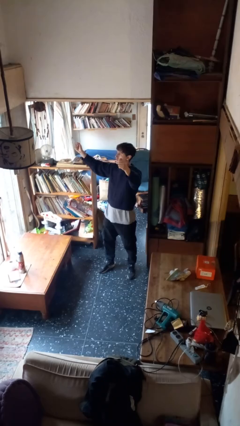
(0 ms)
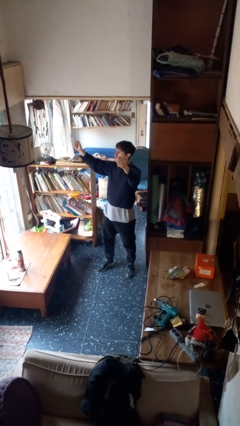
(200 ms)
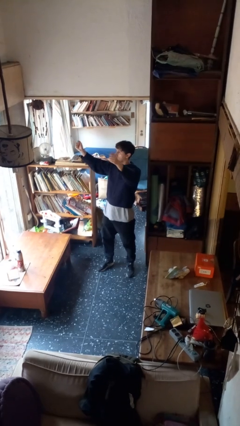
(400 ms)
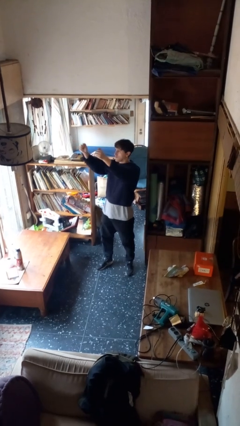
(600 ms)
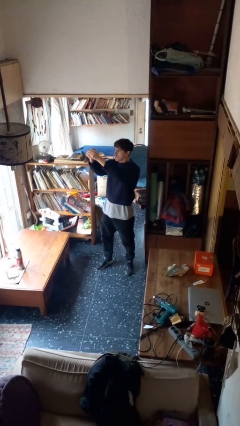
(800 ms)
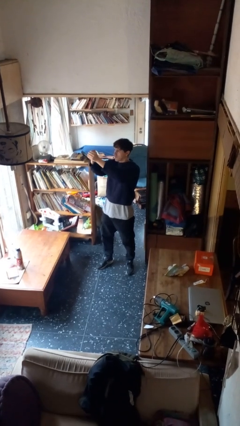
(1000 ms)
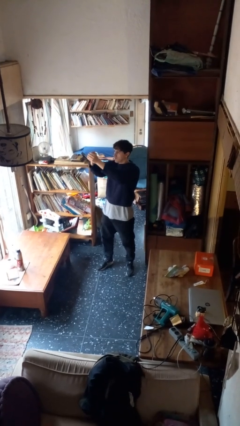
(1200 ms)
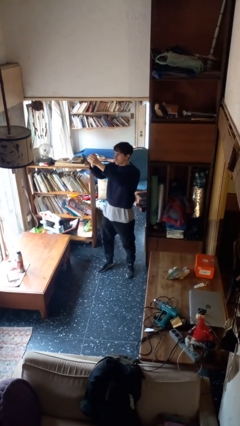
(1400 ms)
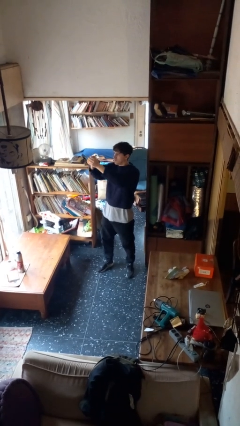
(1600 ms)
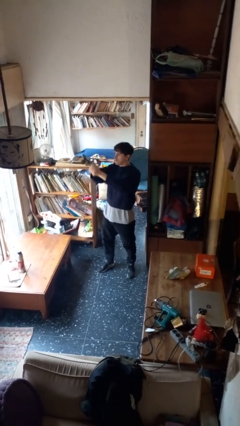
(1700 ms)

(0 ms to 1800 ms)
person gestures zoom out

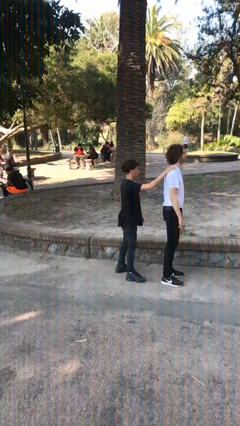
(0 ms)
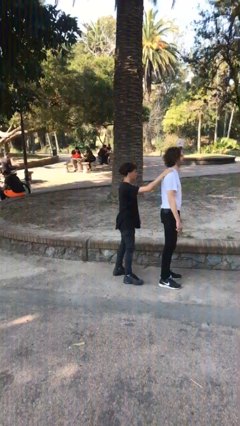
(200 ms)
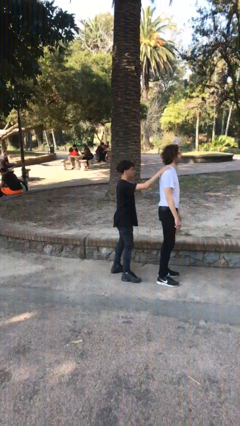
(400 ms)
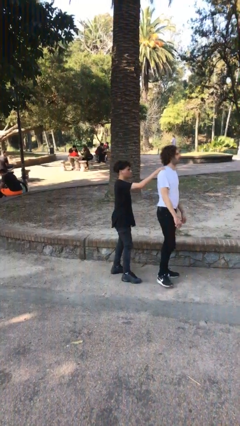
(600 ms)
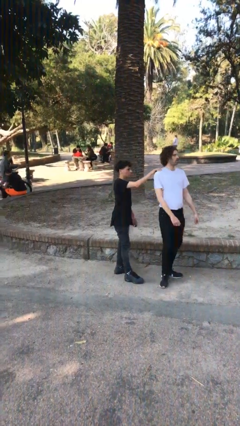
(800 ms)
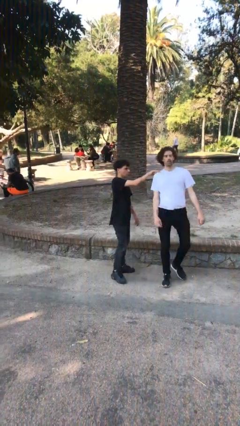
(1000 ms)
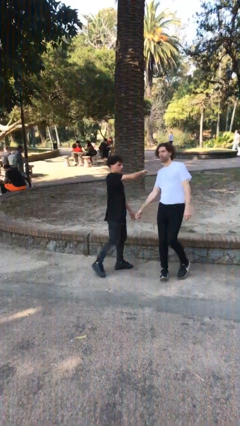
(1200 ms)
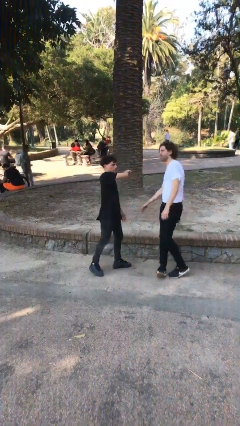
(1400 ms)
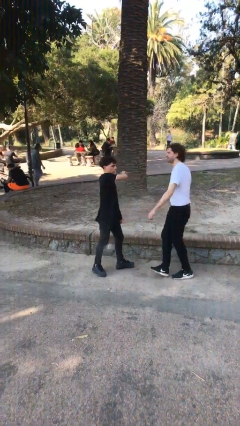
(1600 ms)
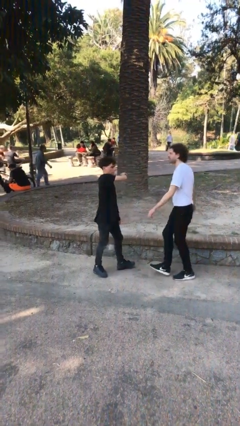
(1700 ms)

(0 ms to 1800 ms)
person spins person around

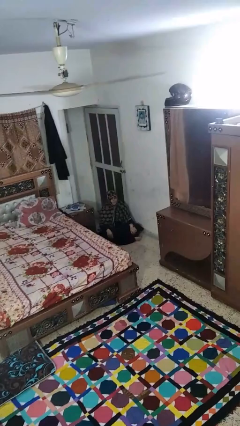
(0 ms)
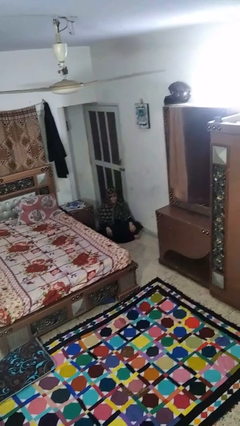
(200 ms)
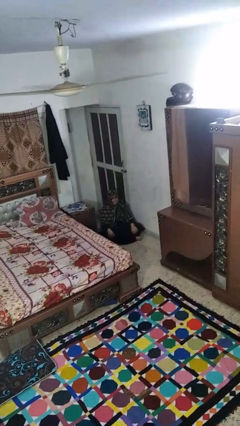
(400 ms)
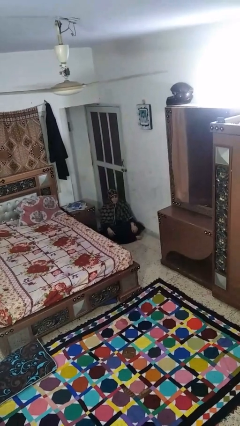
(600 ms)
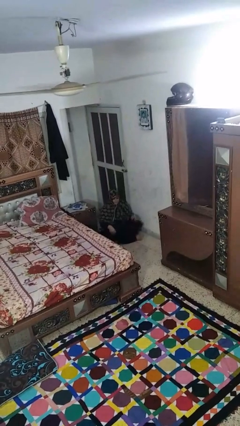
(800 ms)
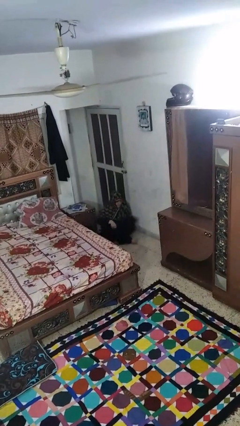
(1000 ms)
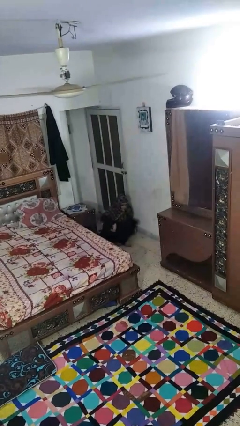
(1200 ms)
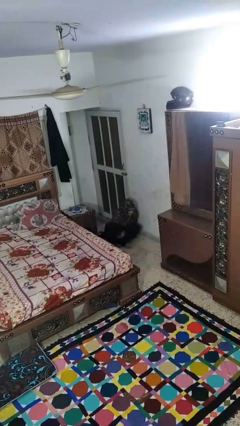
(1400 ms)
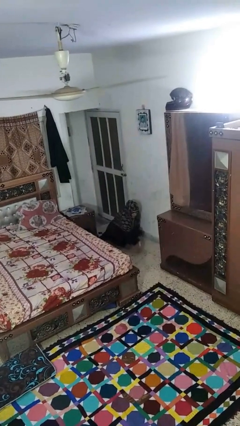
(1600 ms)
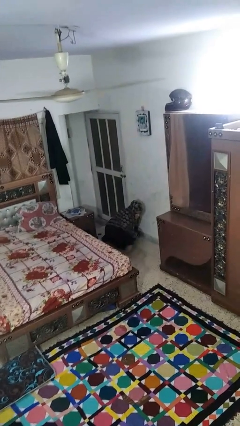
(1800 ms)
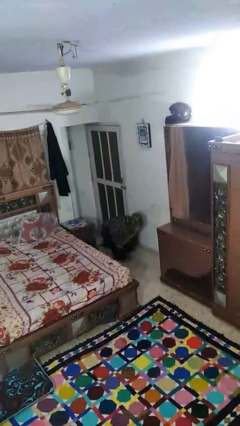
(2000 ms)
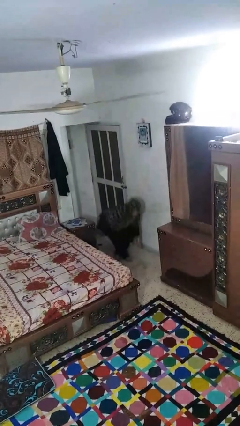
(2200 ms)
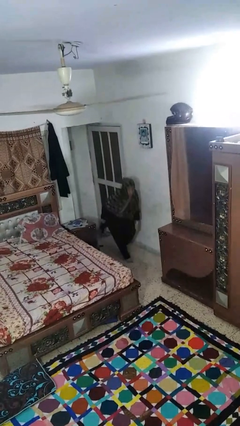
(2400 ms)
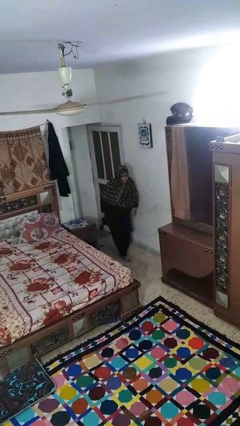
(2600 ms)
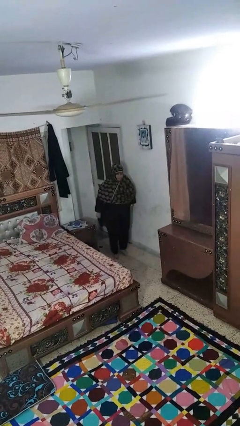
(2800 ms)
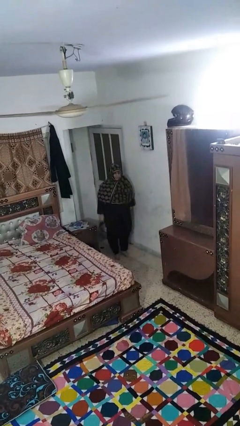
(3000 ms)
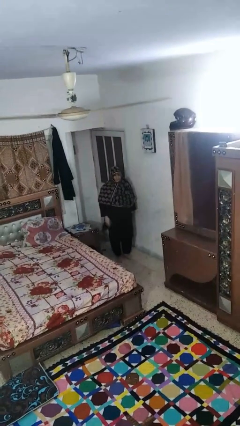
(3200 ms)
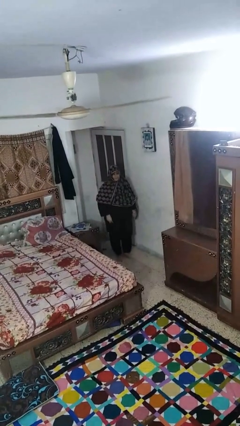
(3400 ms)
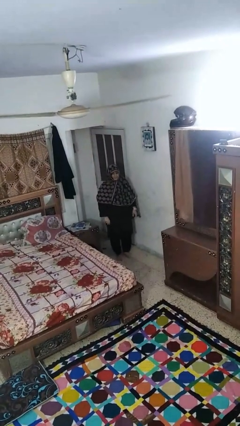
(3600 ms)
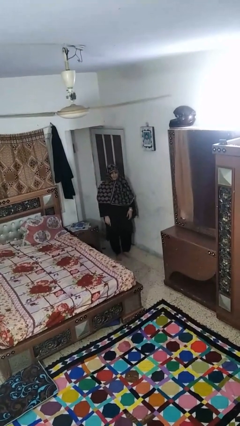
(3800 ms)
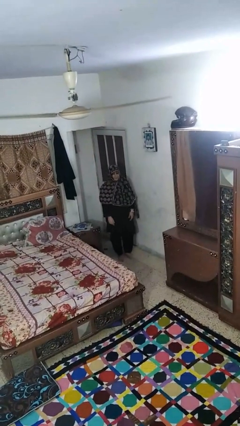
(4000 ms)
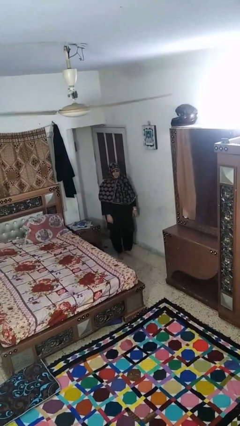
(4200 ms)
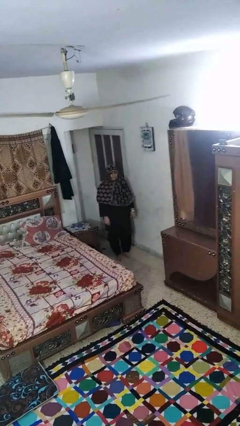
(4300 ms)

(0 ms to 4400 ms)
person stands up from floor

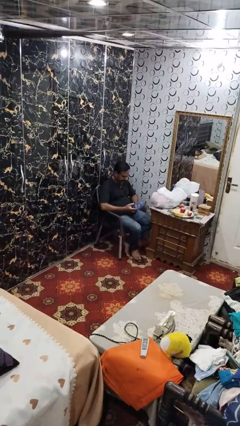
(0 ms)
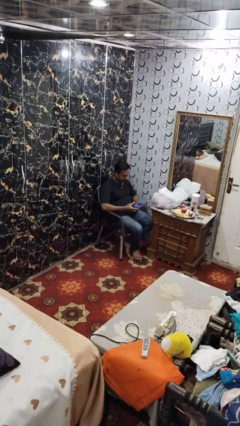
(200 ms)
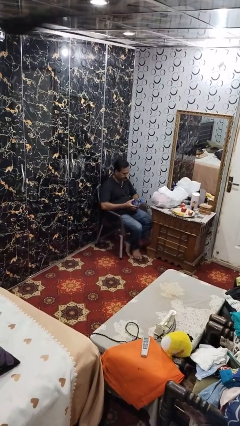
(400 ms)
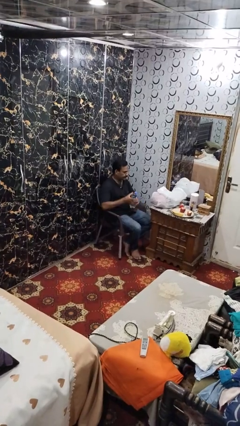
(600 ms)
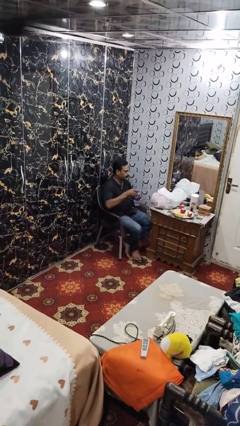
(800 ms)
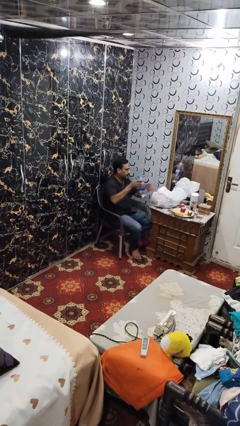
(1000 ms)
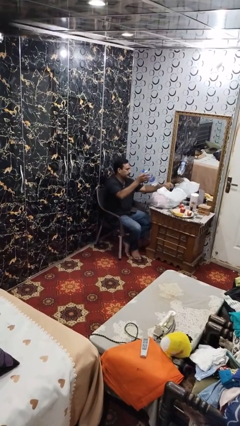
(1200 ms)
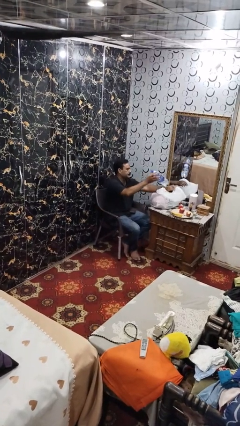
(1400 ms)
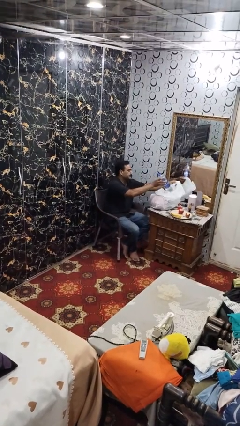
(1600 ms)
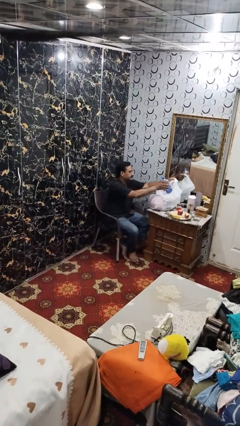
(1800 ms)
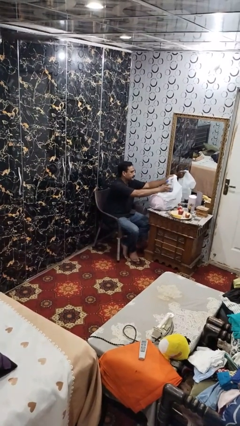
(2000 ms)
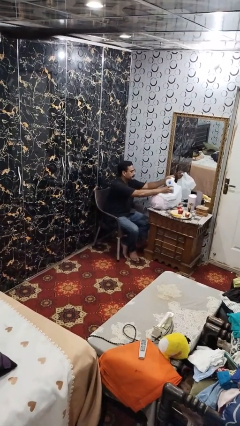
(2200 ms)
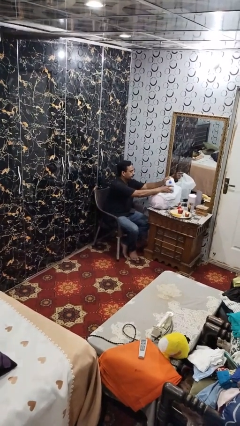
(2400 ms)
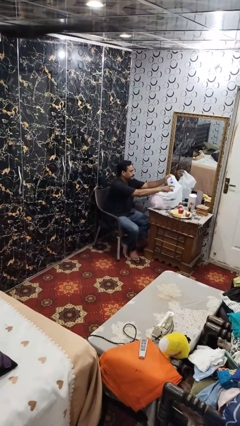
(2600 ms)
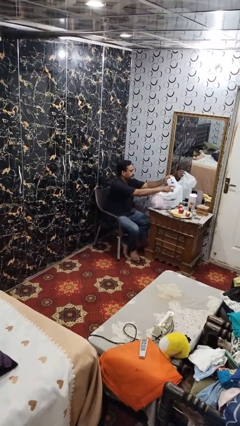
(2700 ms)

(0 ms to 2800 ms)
person puts object into bag

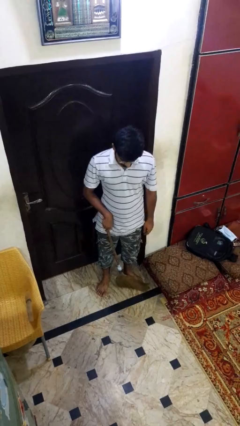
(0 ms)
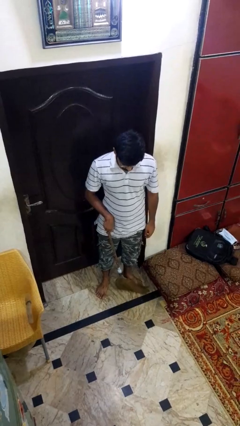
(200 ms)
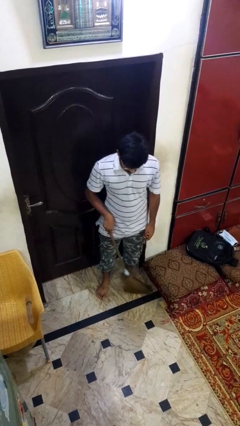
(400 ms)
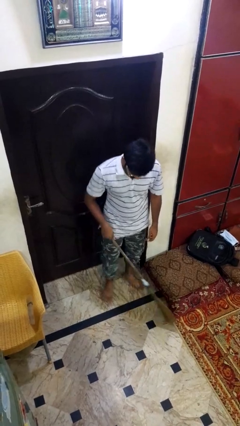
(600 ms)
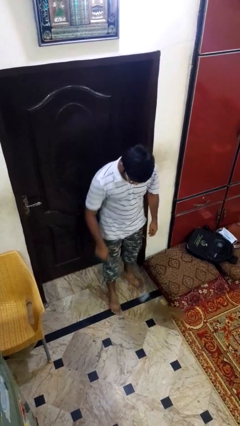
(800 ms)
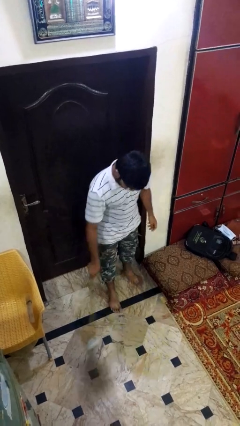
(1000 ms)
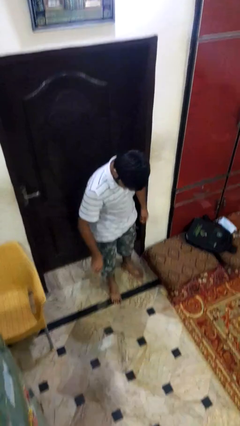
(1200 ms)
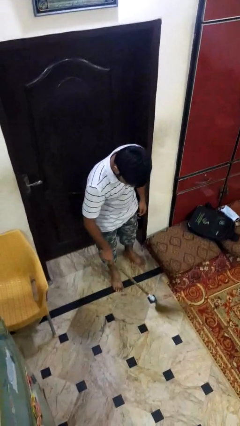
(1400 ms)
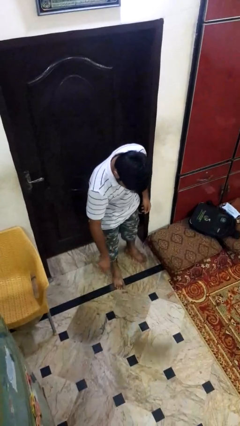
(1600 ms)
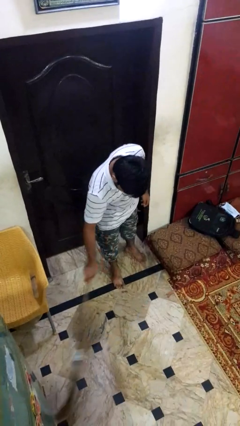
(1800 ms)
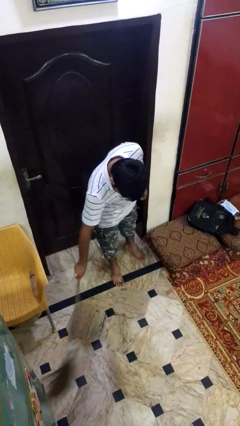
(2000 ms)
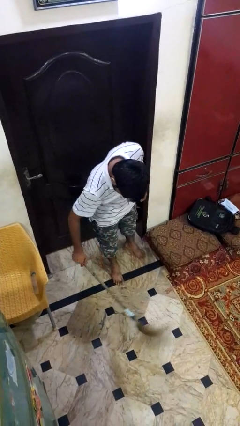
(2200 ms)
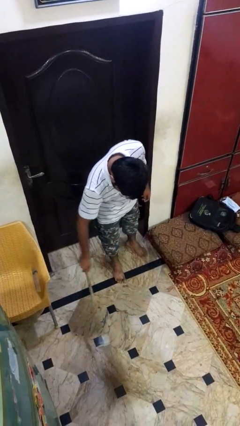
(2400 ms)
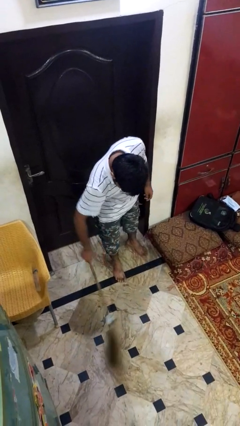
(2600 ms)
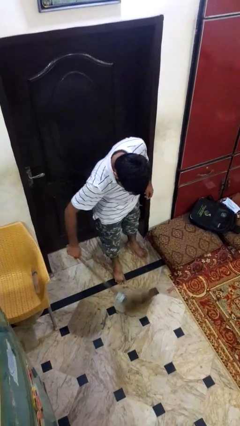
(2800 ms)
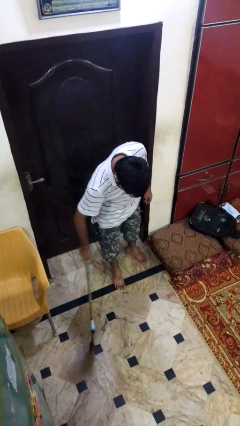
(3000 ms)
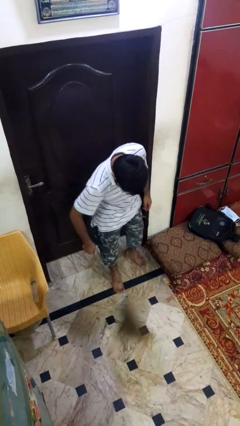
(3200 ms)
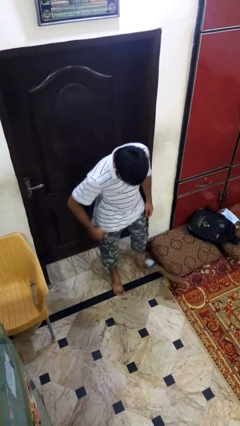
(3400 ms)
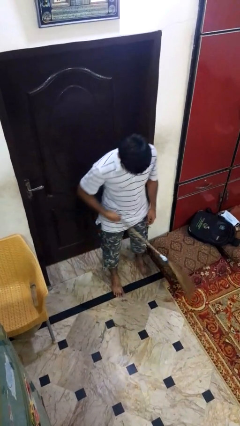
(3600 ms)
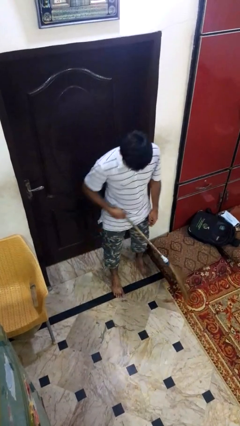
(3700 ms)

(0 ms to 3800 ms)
person sweeps floor

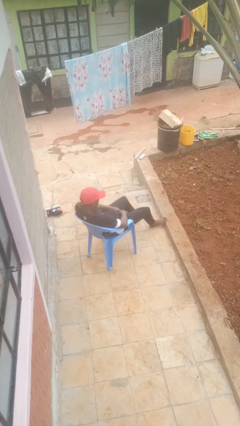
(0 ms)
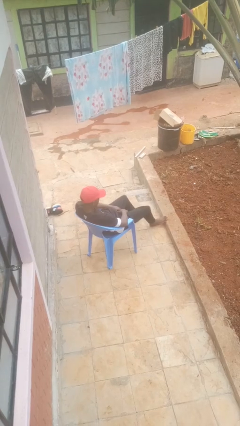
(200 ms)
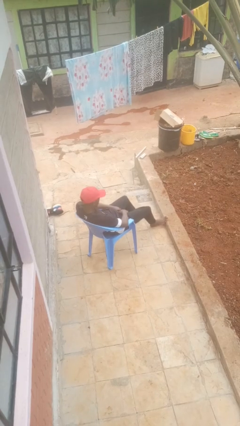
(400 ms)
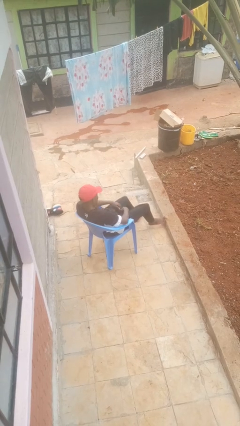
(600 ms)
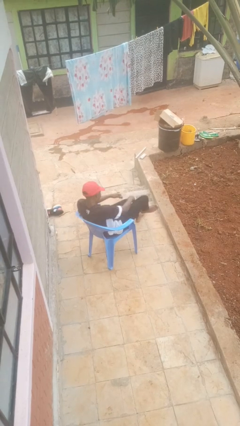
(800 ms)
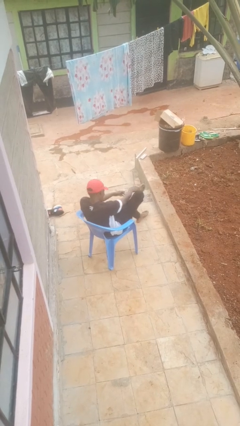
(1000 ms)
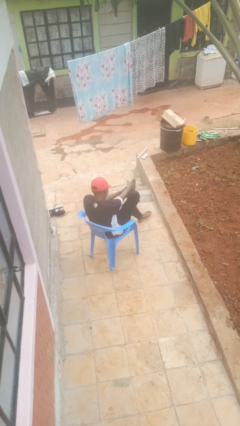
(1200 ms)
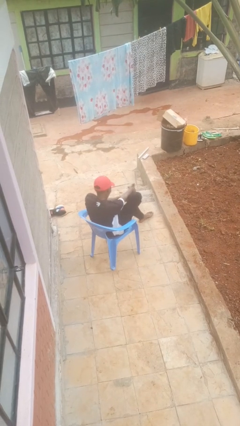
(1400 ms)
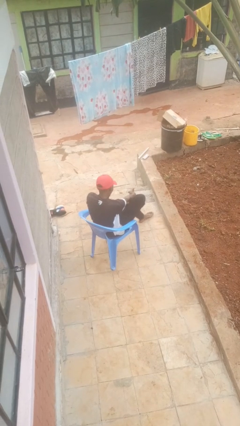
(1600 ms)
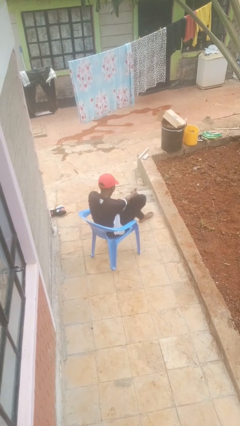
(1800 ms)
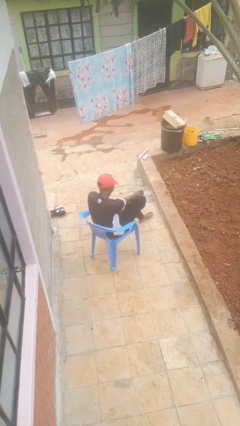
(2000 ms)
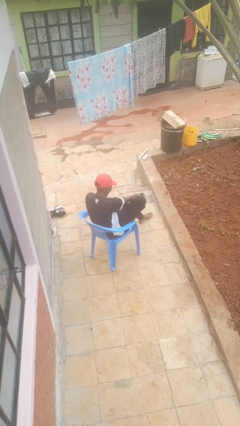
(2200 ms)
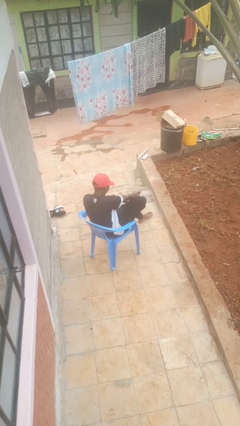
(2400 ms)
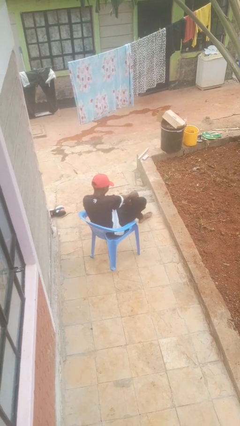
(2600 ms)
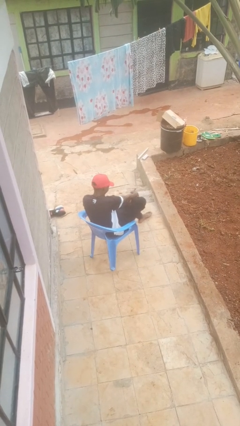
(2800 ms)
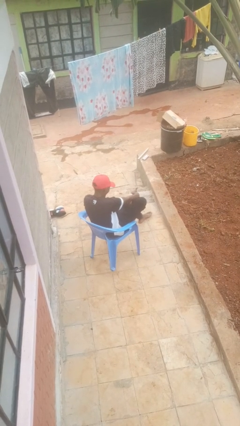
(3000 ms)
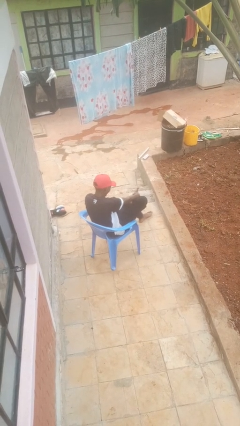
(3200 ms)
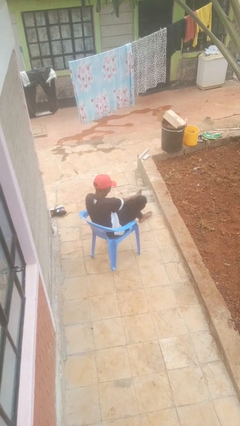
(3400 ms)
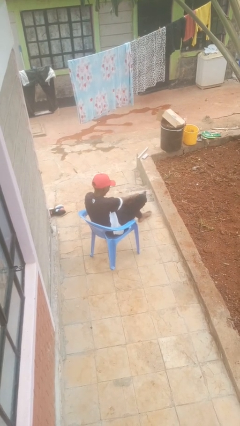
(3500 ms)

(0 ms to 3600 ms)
person rubs foot
